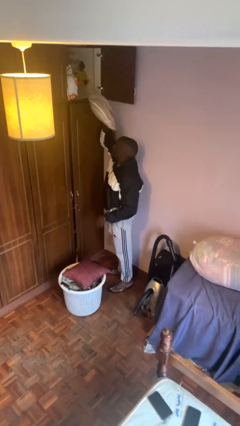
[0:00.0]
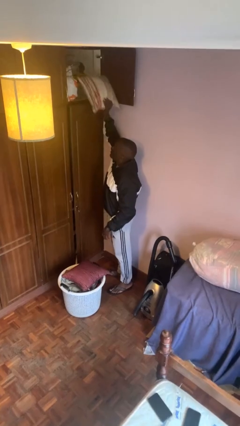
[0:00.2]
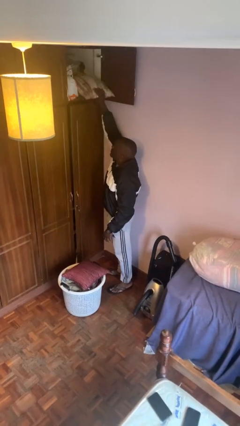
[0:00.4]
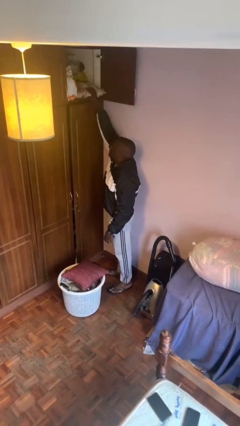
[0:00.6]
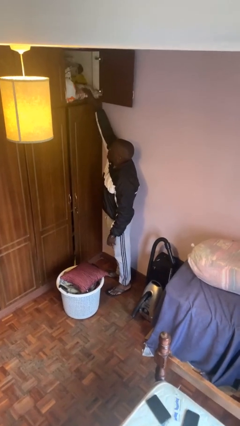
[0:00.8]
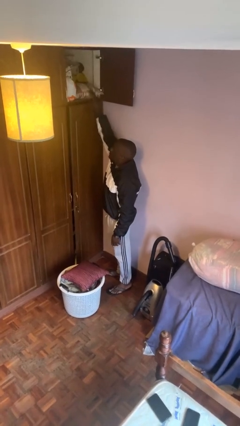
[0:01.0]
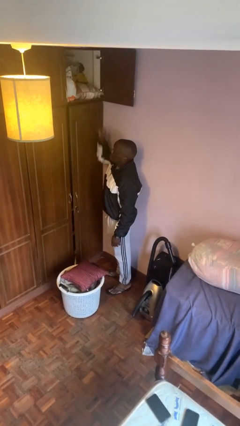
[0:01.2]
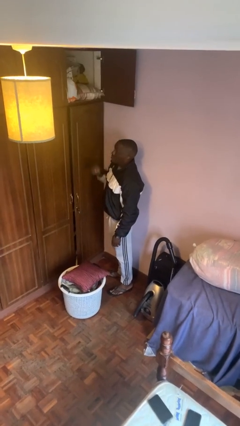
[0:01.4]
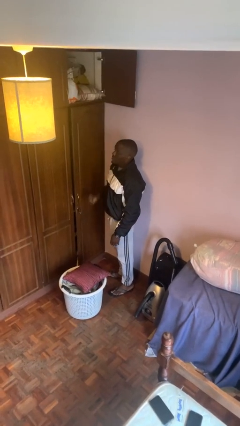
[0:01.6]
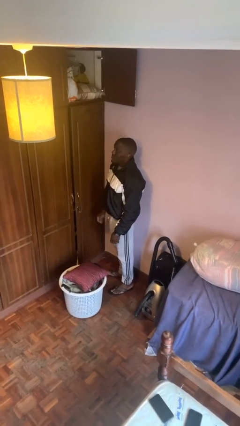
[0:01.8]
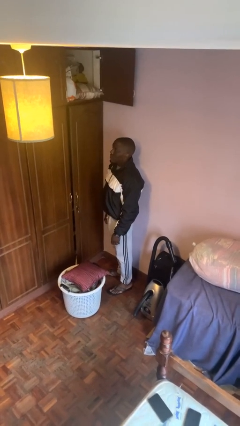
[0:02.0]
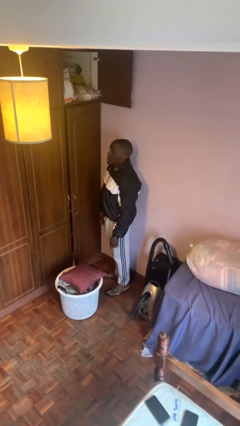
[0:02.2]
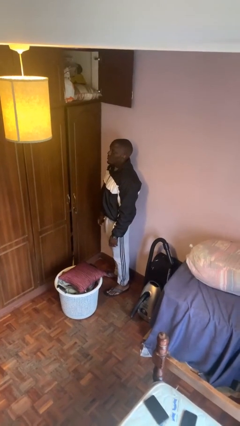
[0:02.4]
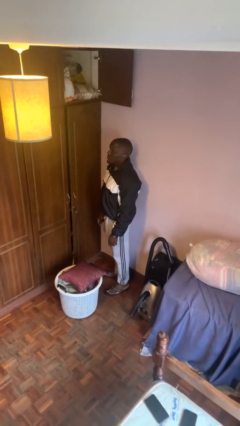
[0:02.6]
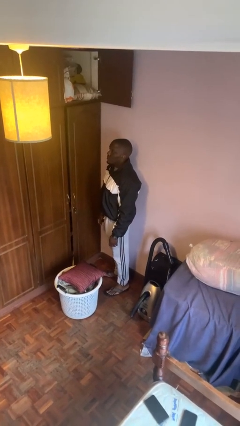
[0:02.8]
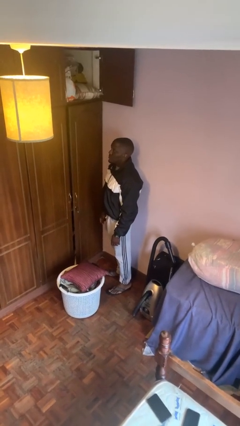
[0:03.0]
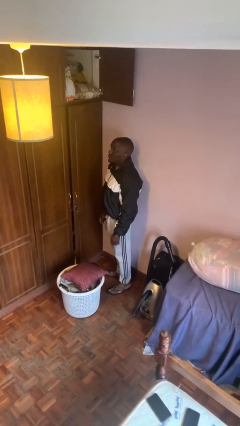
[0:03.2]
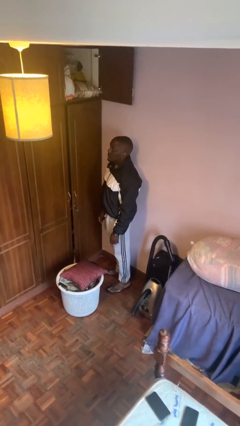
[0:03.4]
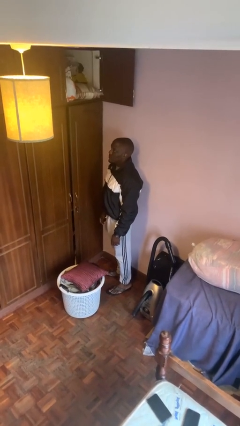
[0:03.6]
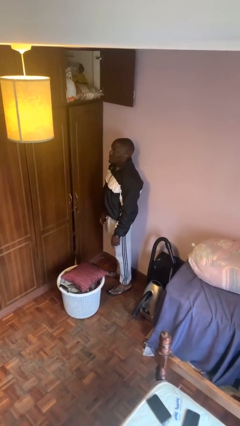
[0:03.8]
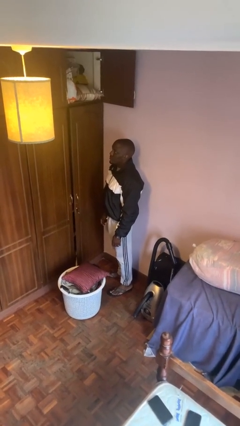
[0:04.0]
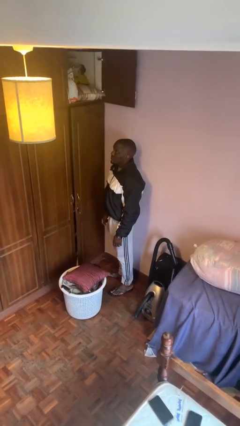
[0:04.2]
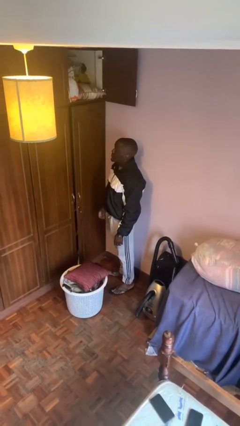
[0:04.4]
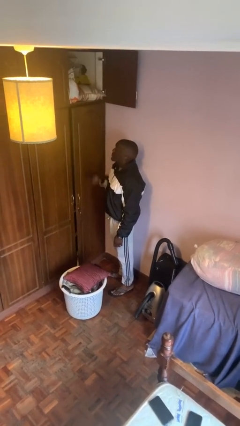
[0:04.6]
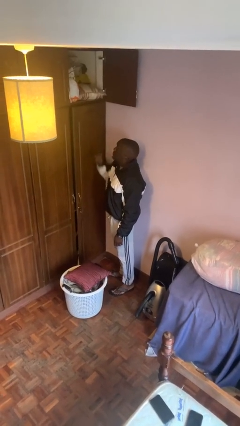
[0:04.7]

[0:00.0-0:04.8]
person puts down object on shelf

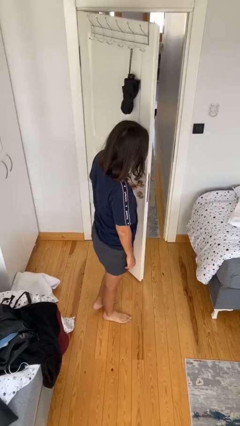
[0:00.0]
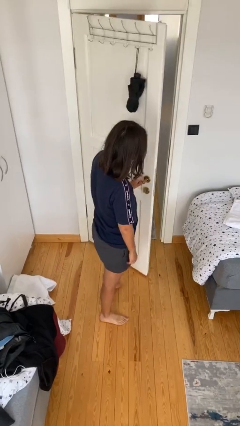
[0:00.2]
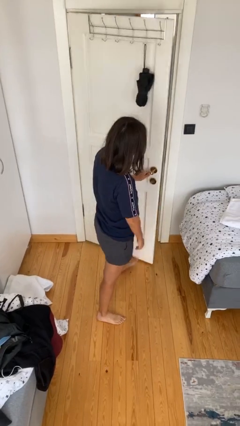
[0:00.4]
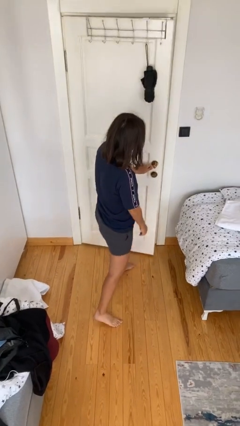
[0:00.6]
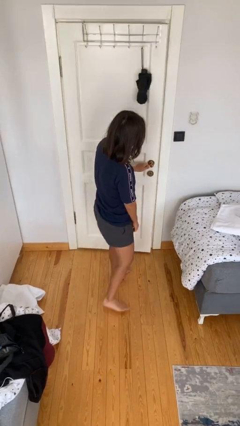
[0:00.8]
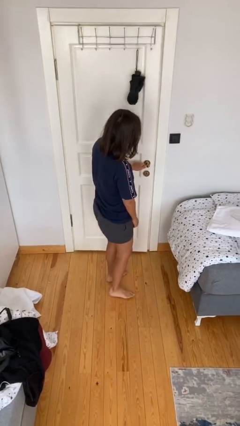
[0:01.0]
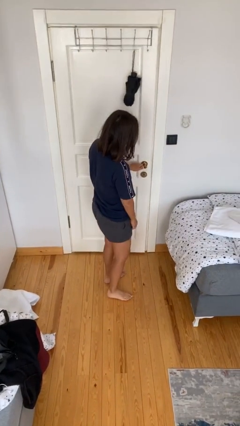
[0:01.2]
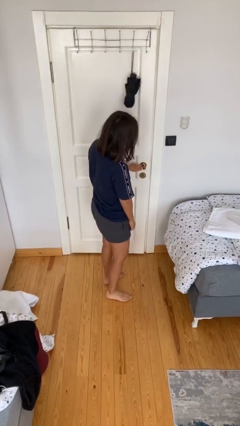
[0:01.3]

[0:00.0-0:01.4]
person closes facility door

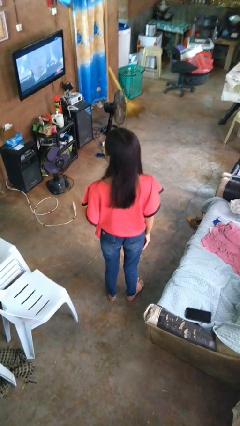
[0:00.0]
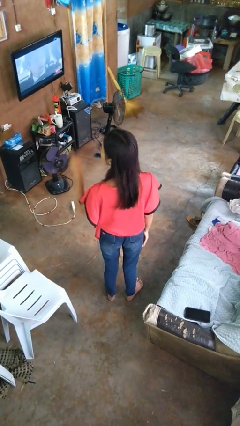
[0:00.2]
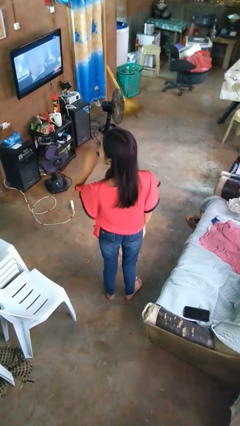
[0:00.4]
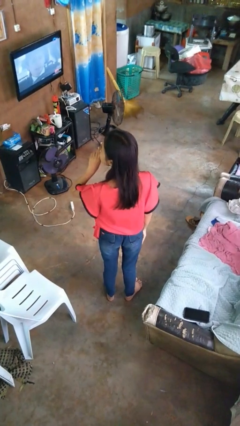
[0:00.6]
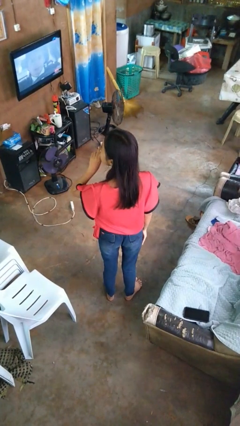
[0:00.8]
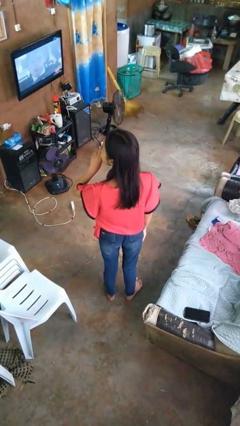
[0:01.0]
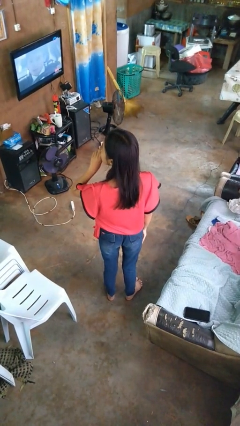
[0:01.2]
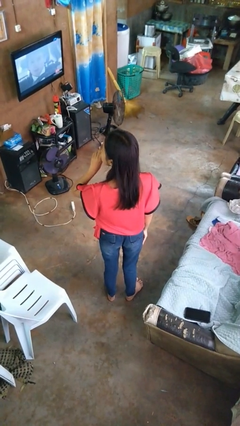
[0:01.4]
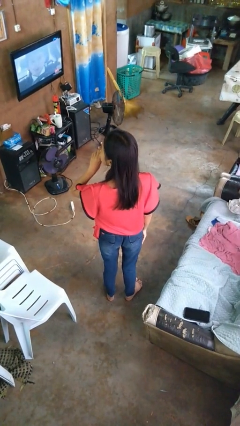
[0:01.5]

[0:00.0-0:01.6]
person gestures be quiet

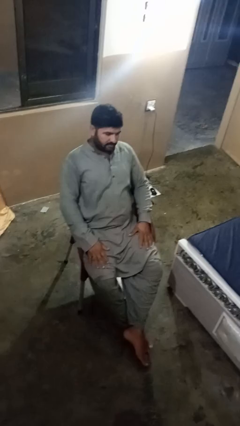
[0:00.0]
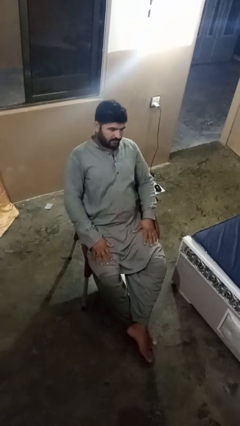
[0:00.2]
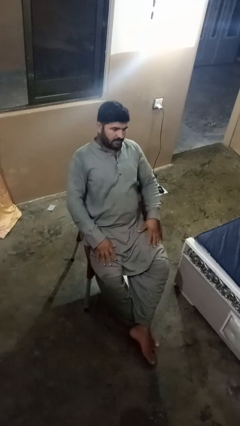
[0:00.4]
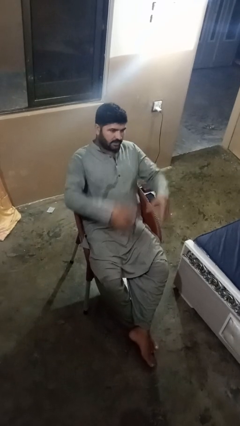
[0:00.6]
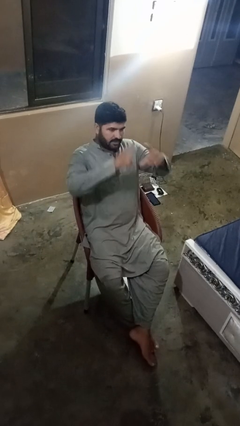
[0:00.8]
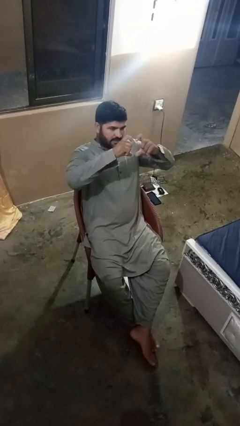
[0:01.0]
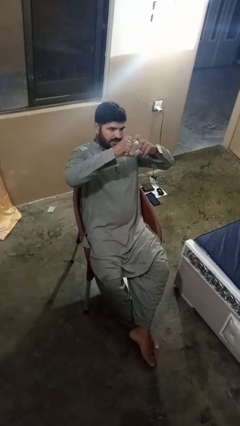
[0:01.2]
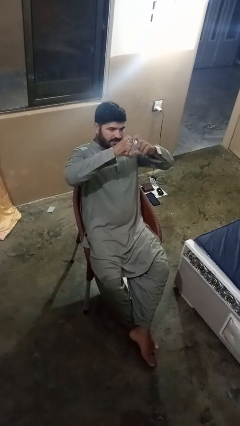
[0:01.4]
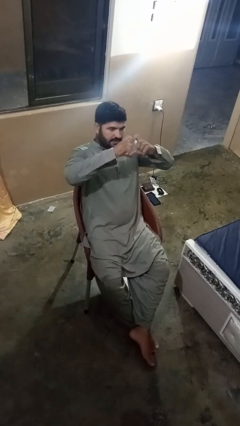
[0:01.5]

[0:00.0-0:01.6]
person gestures heart

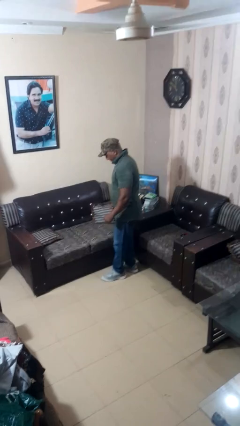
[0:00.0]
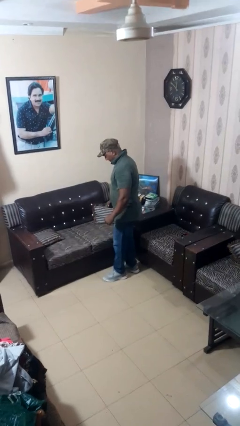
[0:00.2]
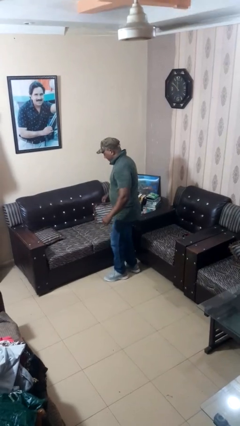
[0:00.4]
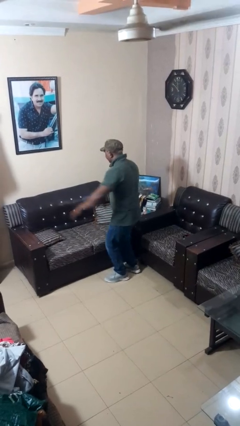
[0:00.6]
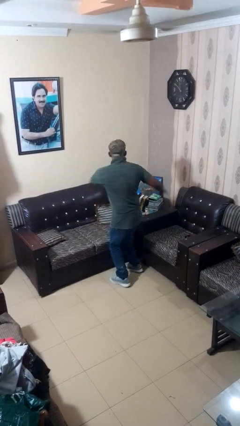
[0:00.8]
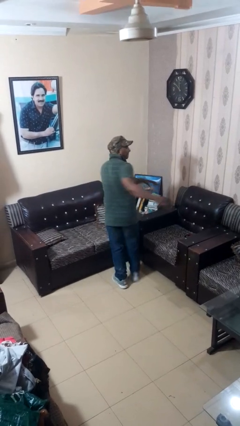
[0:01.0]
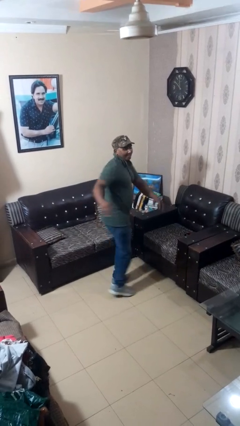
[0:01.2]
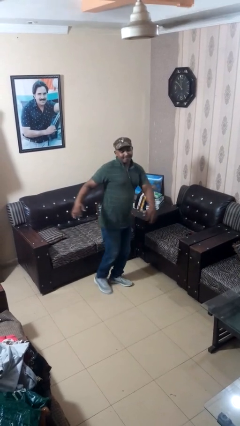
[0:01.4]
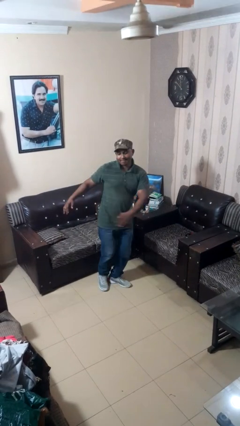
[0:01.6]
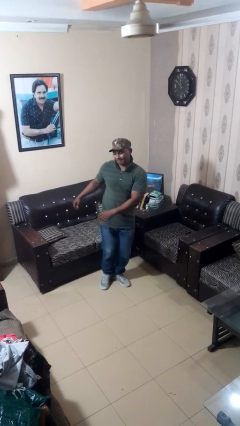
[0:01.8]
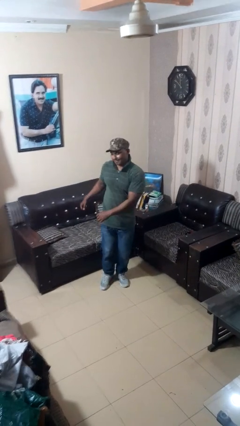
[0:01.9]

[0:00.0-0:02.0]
person twirls

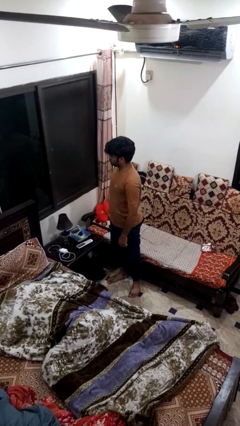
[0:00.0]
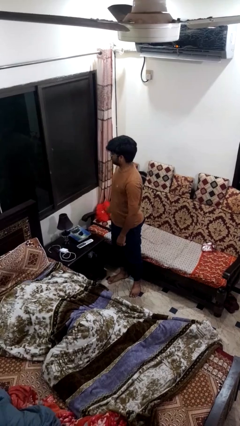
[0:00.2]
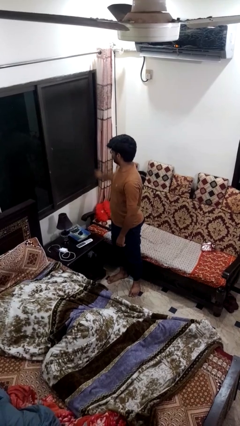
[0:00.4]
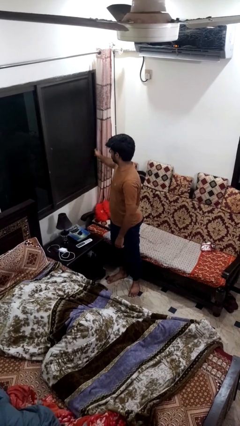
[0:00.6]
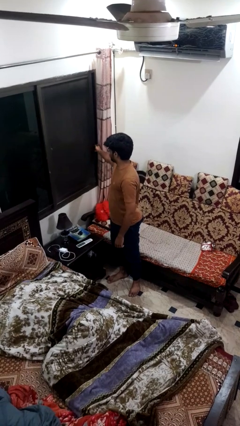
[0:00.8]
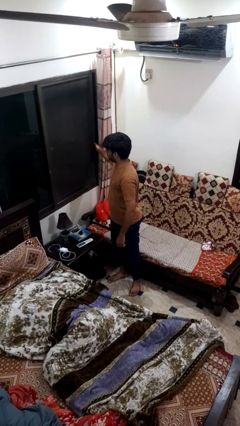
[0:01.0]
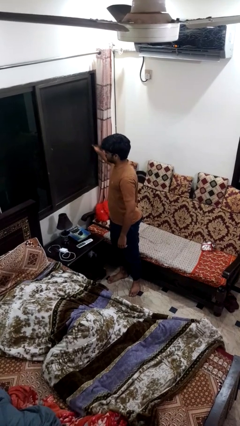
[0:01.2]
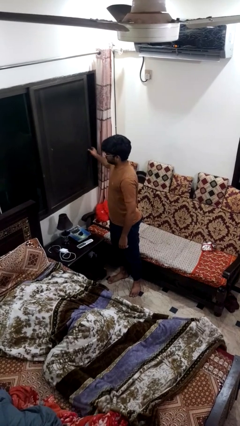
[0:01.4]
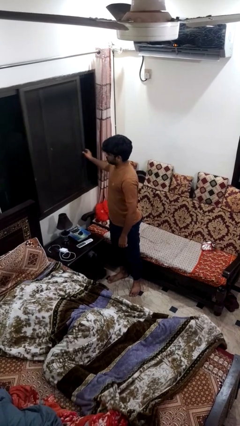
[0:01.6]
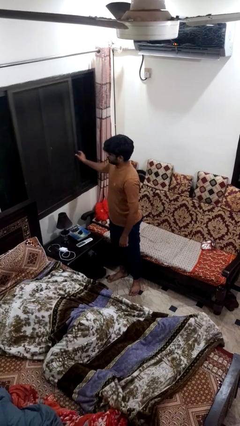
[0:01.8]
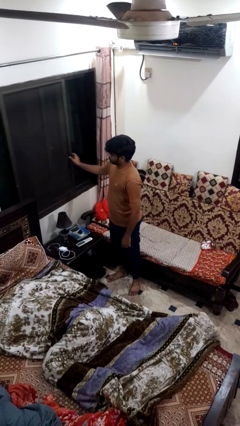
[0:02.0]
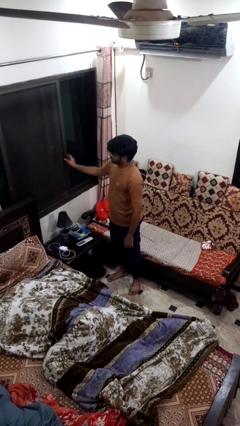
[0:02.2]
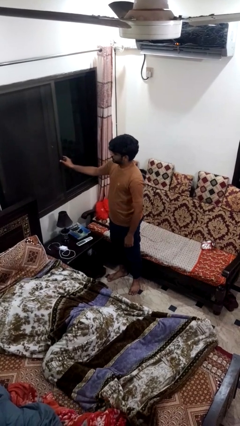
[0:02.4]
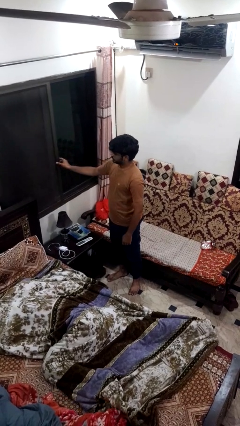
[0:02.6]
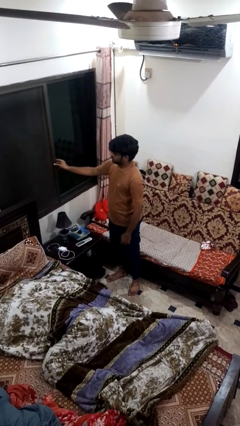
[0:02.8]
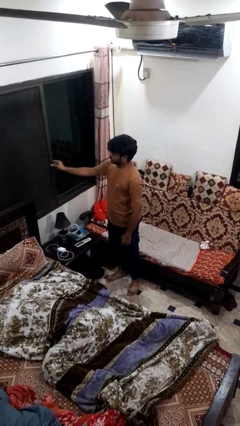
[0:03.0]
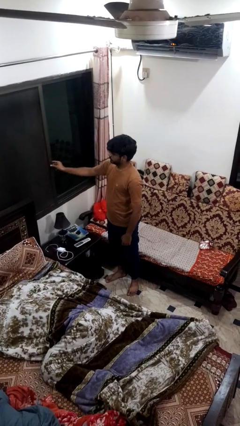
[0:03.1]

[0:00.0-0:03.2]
person closes home window

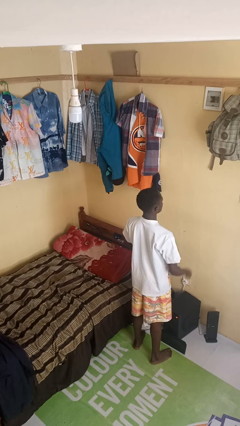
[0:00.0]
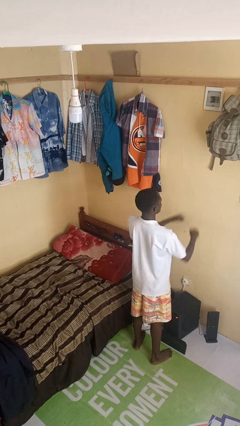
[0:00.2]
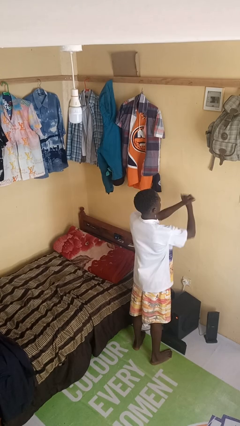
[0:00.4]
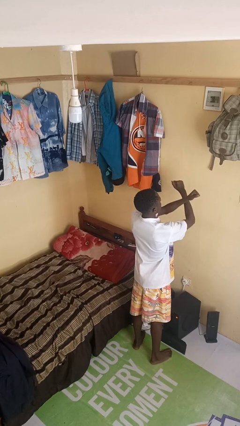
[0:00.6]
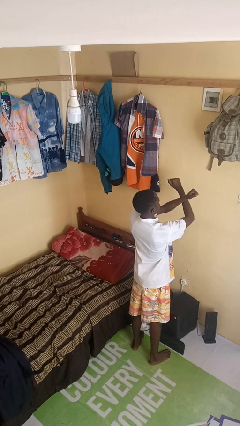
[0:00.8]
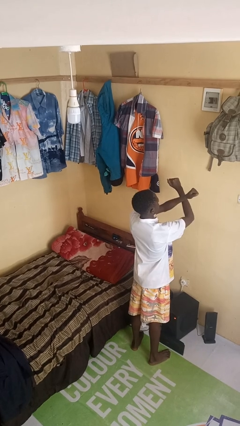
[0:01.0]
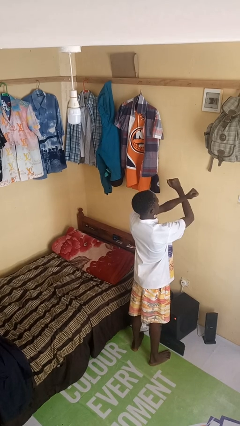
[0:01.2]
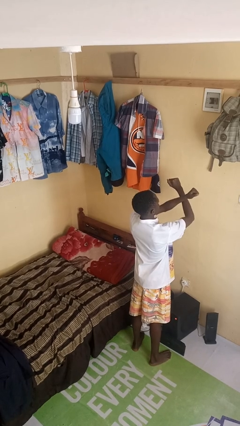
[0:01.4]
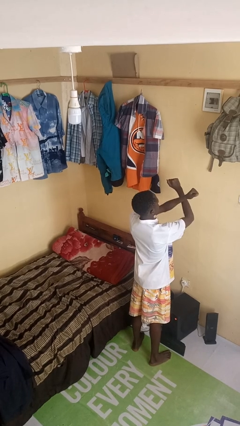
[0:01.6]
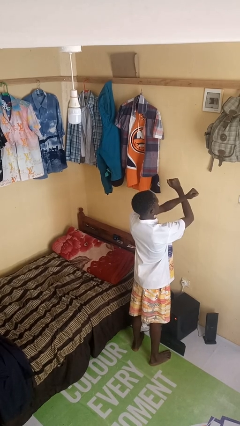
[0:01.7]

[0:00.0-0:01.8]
person gestures arms x
